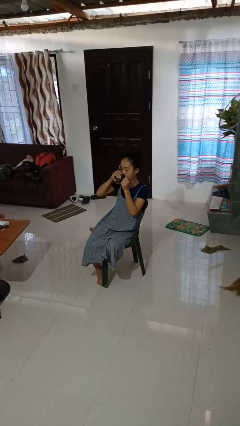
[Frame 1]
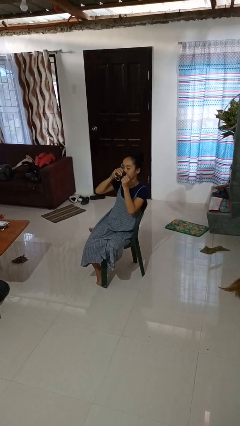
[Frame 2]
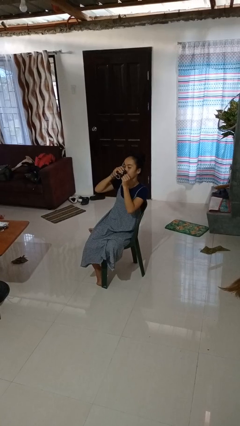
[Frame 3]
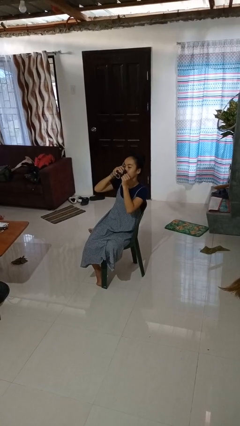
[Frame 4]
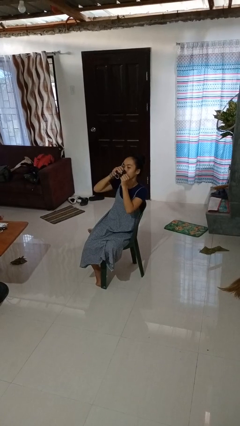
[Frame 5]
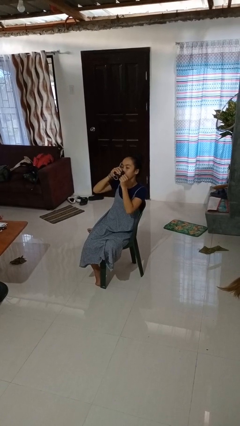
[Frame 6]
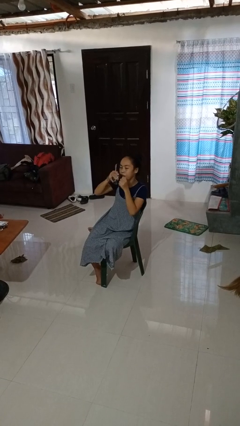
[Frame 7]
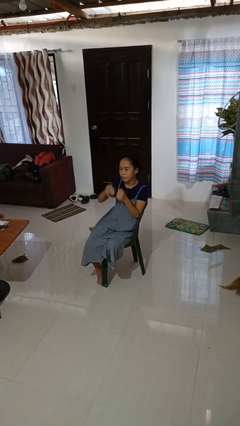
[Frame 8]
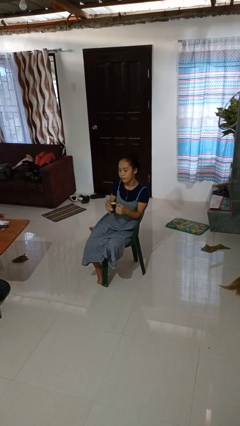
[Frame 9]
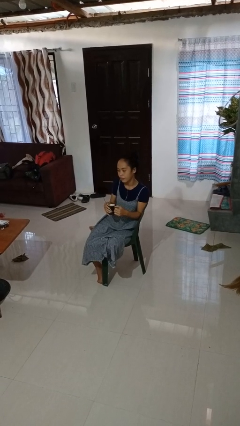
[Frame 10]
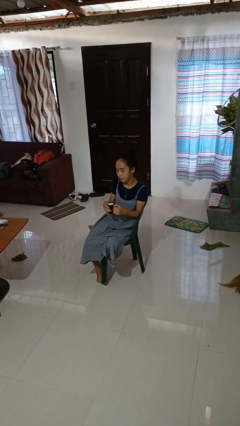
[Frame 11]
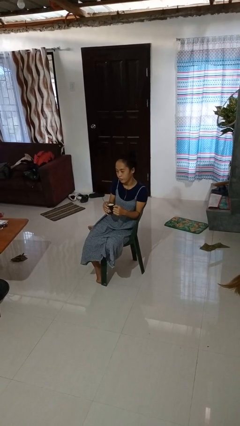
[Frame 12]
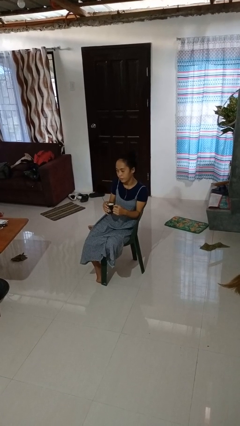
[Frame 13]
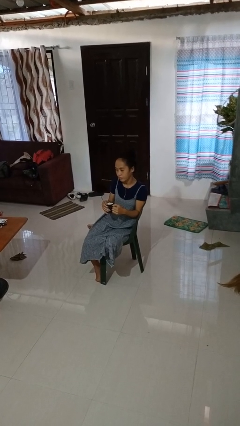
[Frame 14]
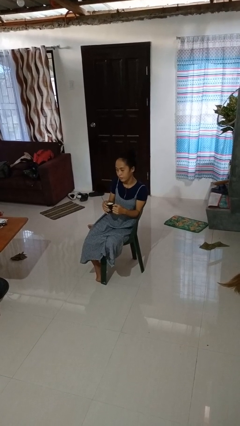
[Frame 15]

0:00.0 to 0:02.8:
person drinks from mug

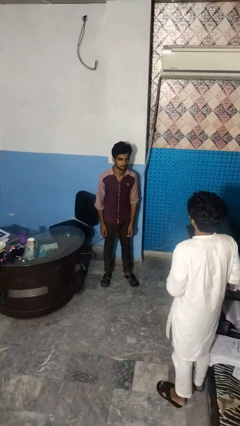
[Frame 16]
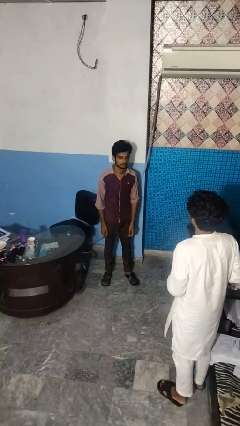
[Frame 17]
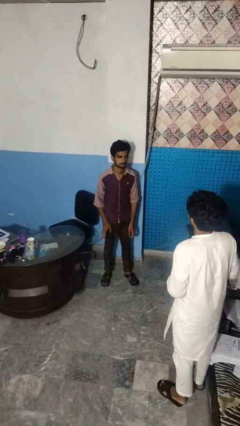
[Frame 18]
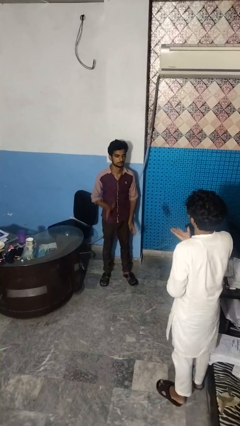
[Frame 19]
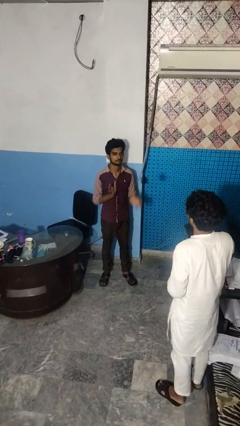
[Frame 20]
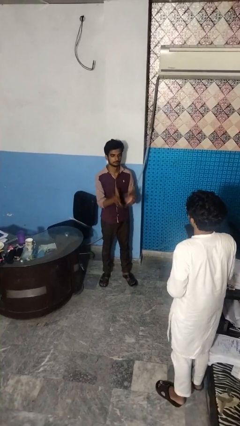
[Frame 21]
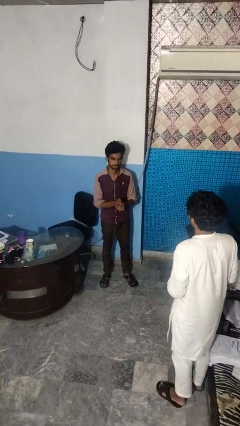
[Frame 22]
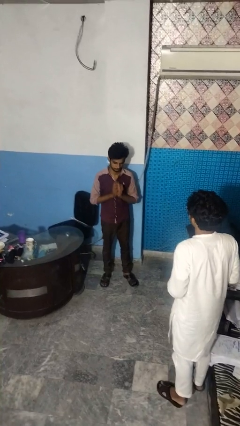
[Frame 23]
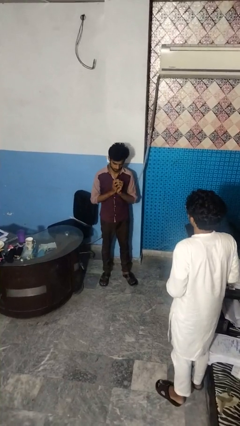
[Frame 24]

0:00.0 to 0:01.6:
person catches object from person

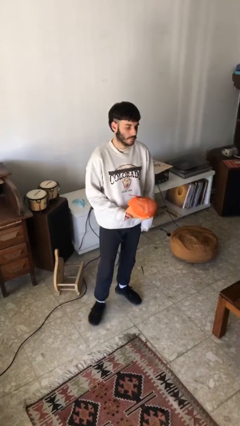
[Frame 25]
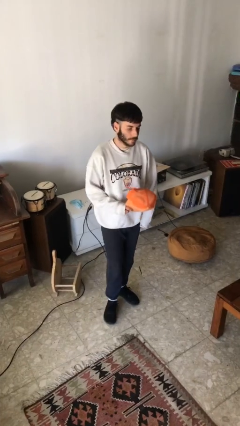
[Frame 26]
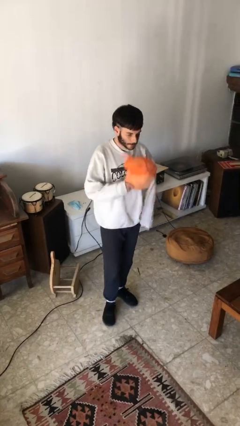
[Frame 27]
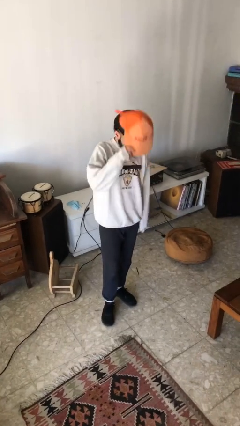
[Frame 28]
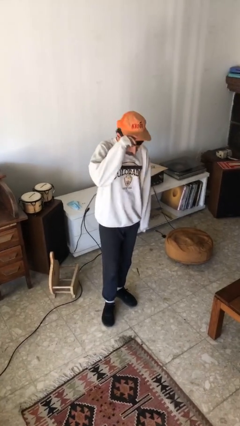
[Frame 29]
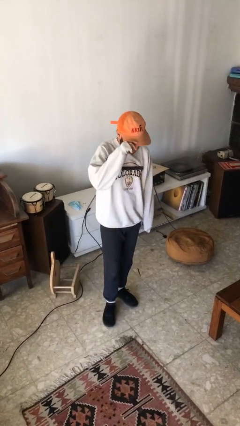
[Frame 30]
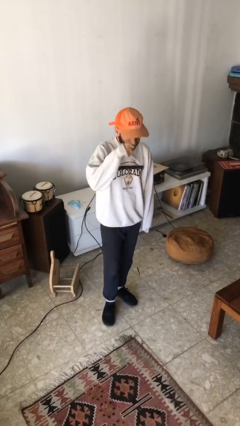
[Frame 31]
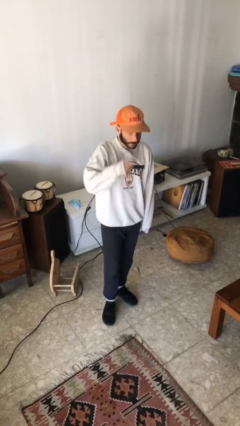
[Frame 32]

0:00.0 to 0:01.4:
person puts on hat

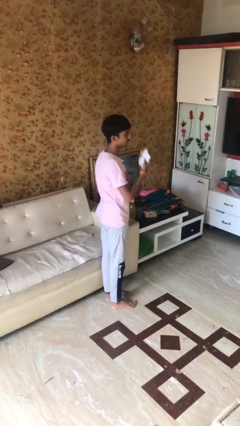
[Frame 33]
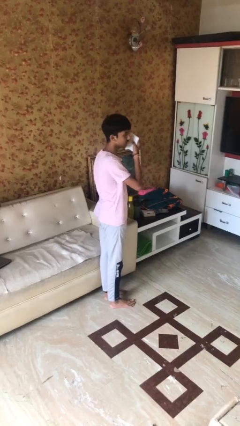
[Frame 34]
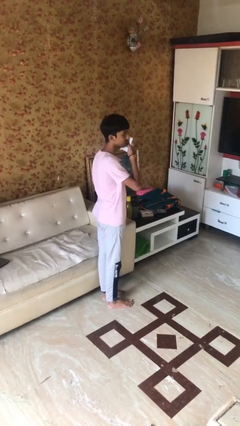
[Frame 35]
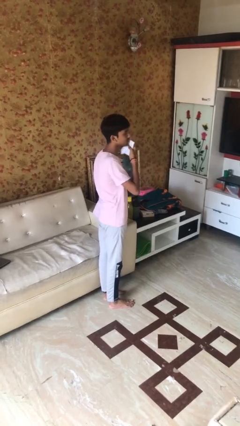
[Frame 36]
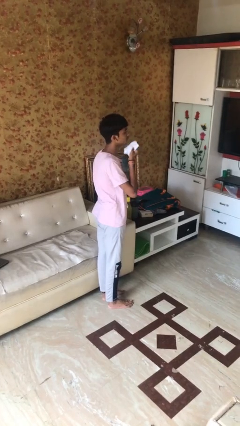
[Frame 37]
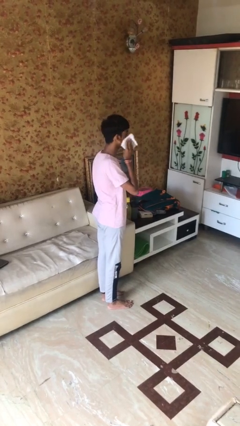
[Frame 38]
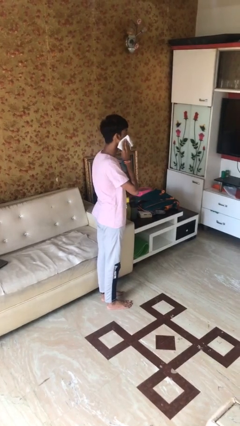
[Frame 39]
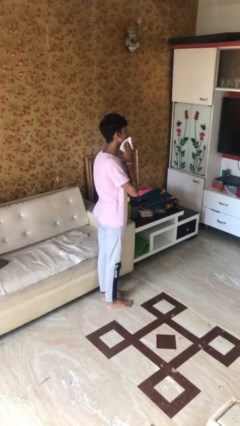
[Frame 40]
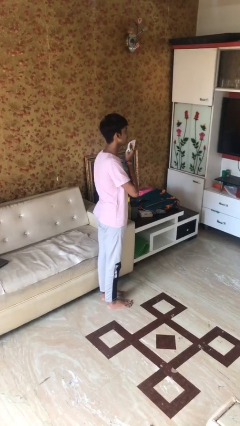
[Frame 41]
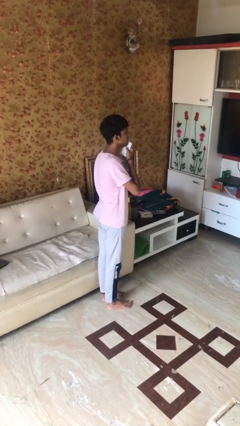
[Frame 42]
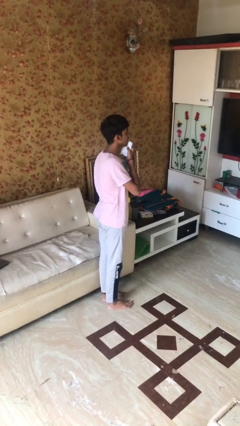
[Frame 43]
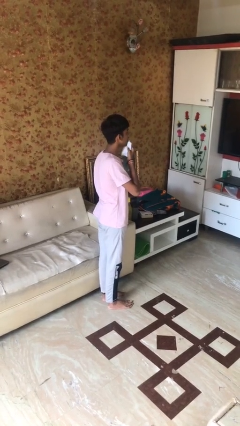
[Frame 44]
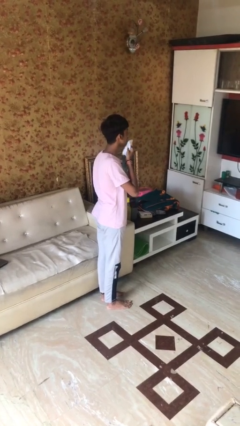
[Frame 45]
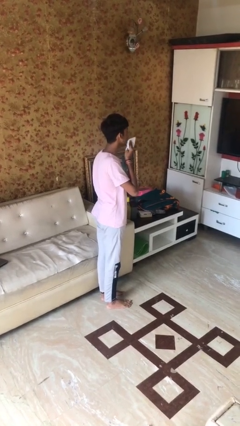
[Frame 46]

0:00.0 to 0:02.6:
person wipes mouth with napkin

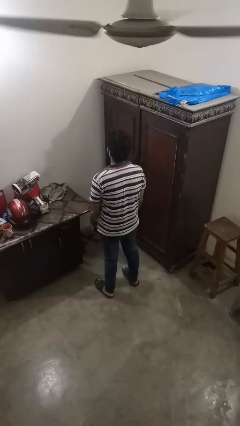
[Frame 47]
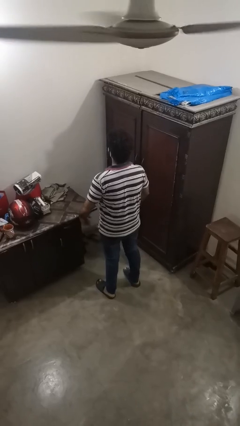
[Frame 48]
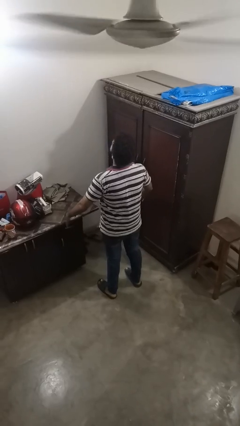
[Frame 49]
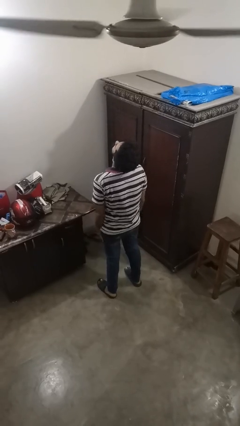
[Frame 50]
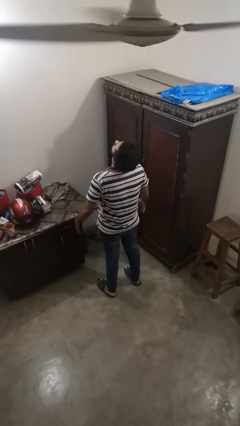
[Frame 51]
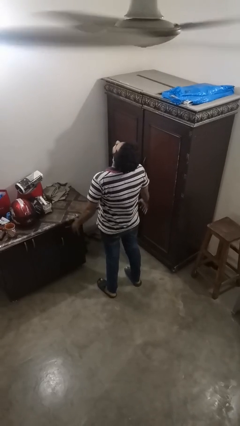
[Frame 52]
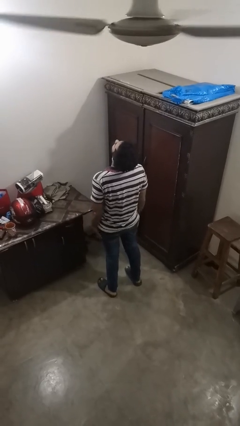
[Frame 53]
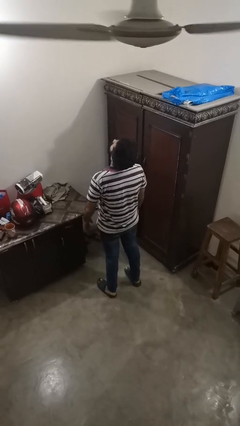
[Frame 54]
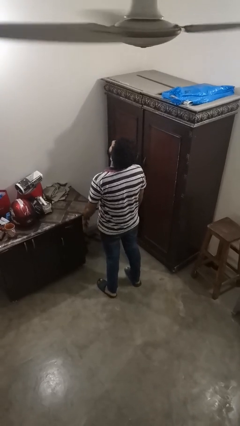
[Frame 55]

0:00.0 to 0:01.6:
person slaps hands on thighs

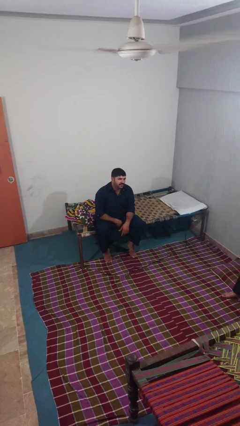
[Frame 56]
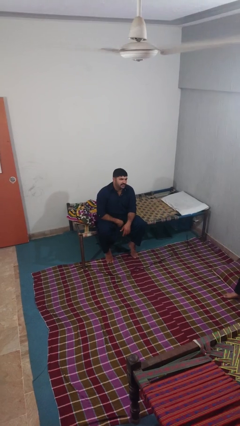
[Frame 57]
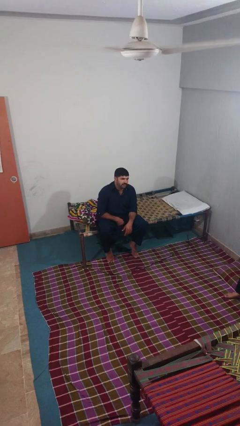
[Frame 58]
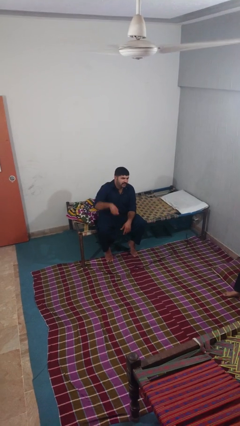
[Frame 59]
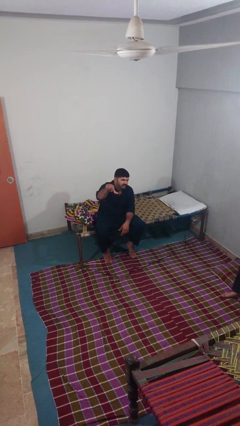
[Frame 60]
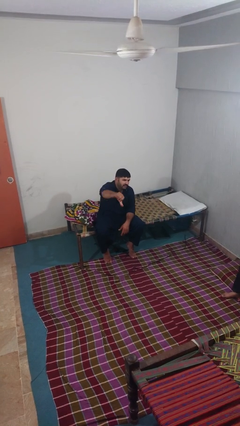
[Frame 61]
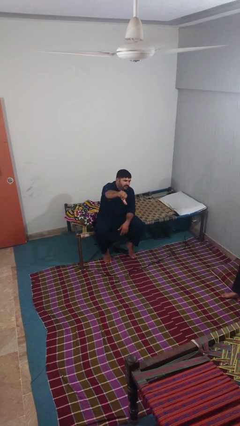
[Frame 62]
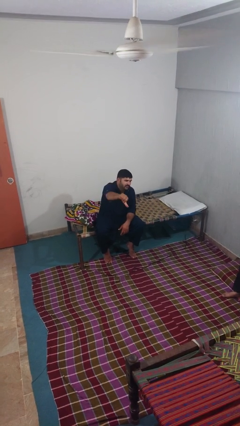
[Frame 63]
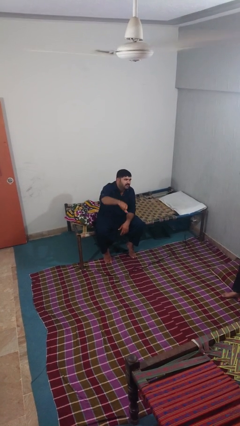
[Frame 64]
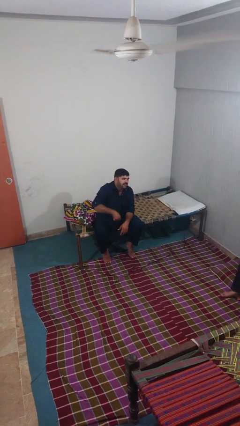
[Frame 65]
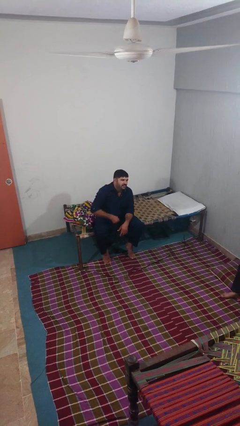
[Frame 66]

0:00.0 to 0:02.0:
person gestures thumbs down

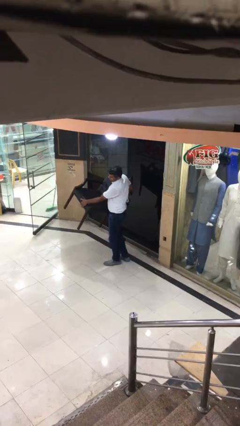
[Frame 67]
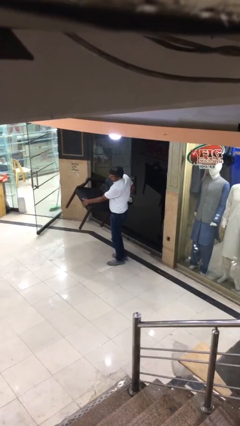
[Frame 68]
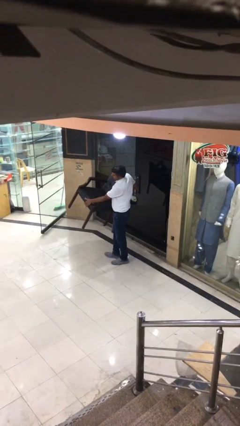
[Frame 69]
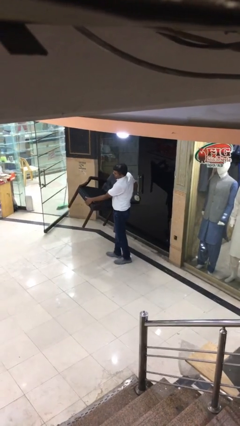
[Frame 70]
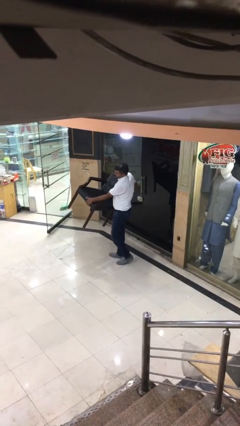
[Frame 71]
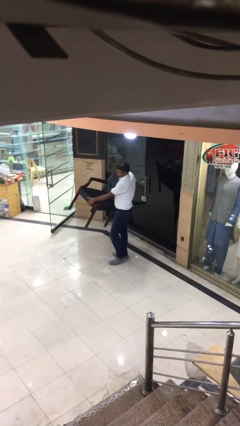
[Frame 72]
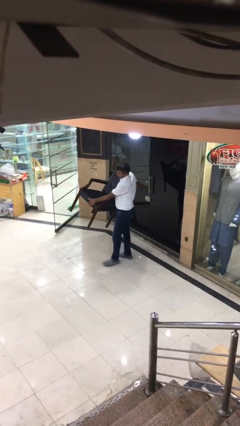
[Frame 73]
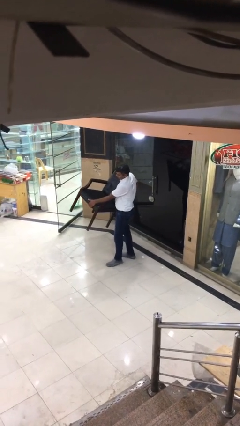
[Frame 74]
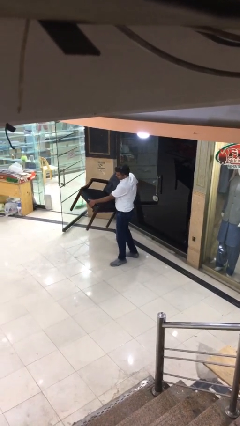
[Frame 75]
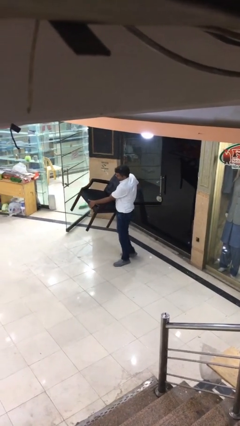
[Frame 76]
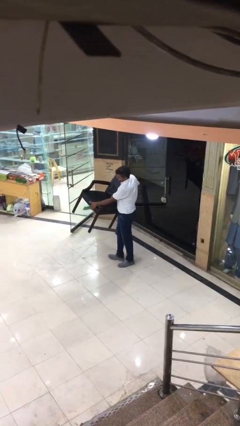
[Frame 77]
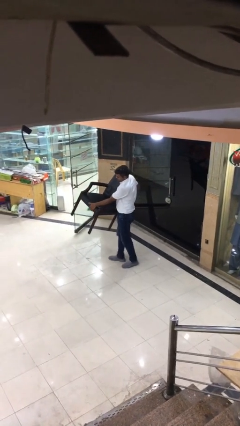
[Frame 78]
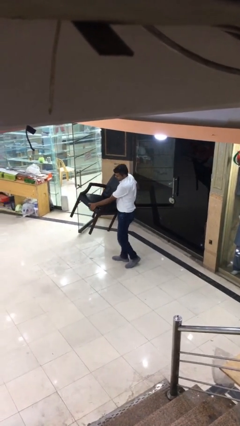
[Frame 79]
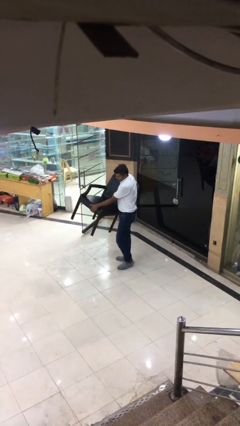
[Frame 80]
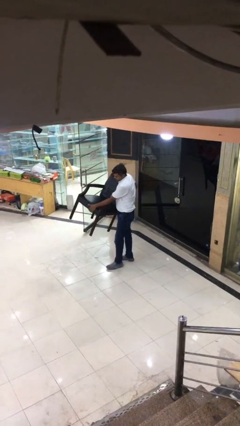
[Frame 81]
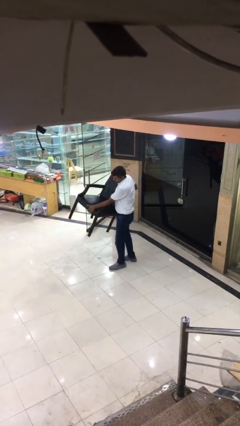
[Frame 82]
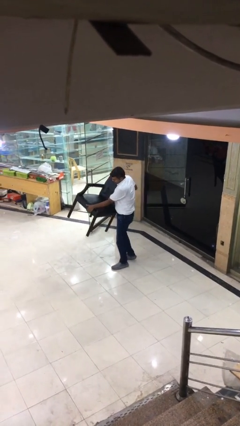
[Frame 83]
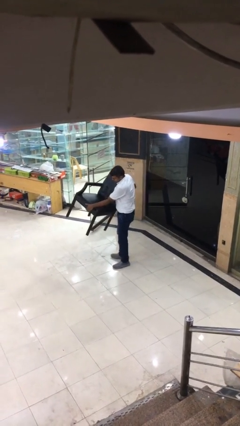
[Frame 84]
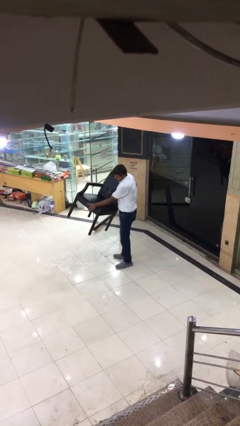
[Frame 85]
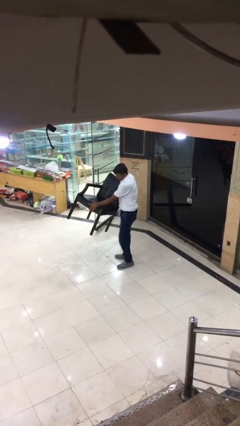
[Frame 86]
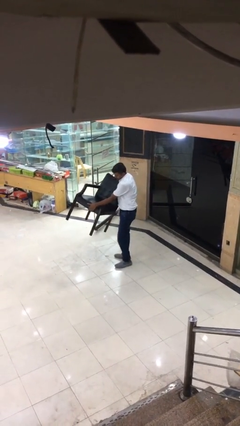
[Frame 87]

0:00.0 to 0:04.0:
person carries heavy object

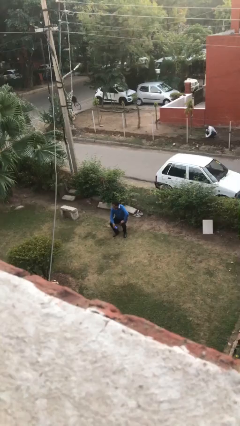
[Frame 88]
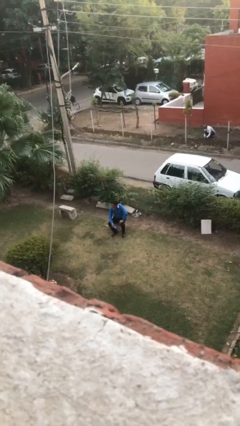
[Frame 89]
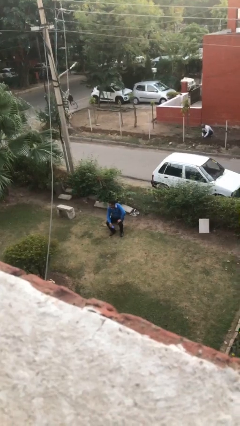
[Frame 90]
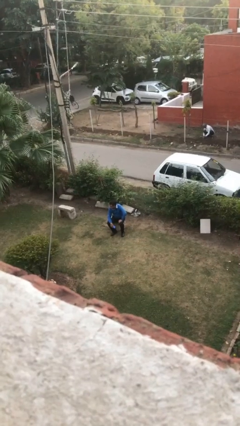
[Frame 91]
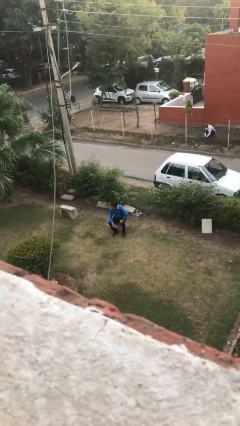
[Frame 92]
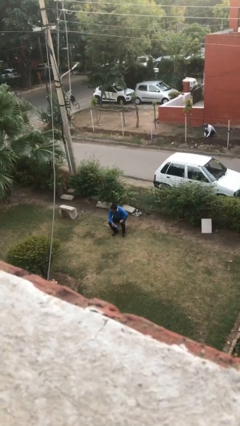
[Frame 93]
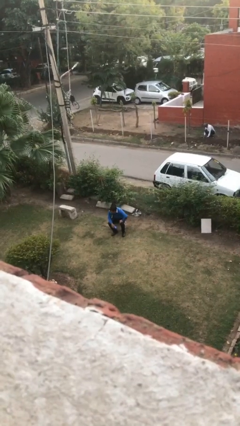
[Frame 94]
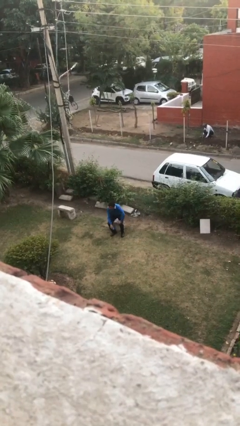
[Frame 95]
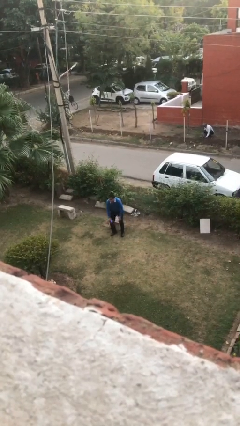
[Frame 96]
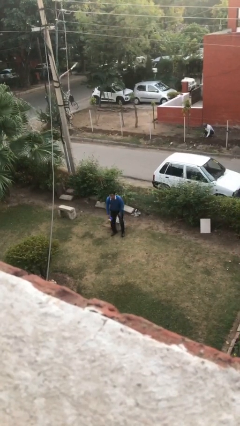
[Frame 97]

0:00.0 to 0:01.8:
person stands up
